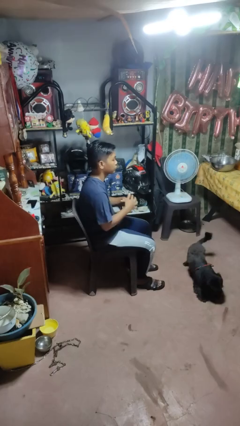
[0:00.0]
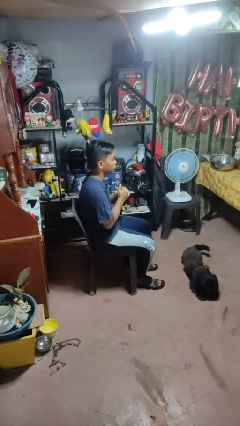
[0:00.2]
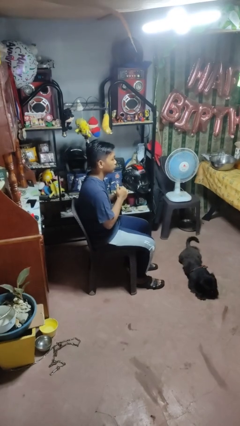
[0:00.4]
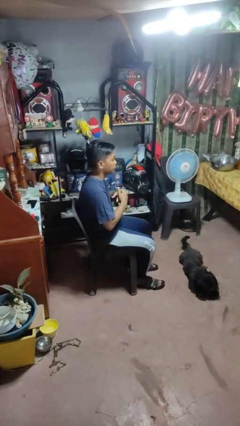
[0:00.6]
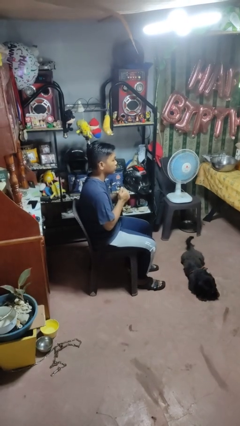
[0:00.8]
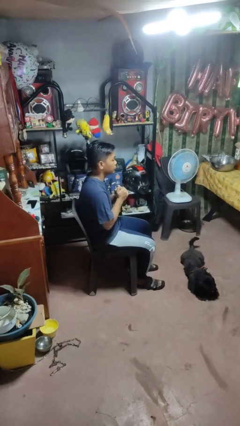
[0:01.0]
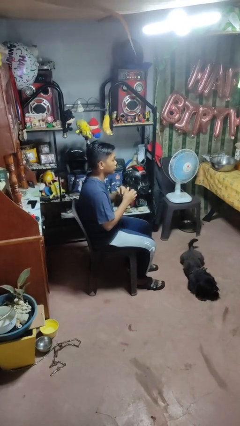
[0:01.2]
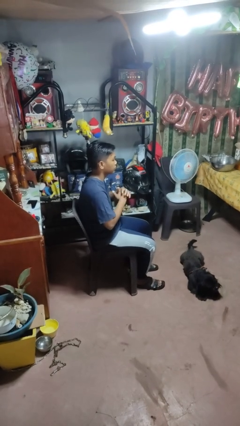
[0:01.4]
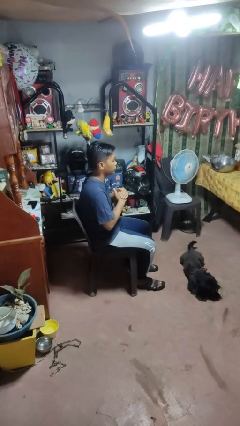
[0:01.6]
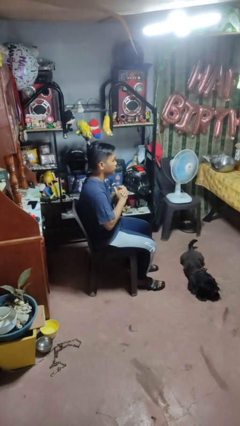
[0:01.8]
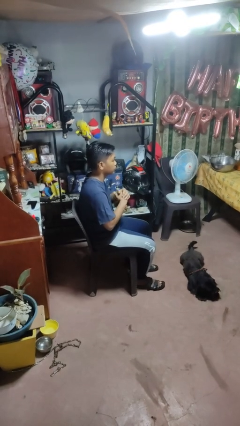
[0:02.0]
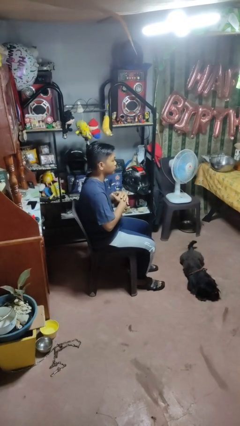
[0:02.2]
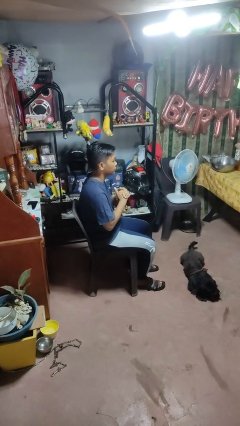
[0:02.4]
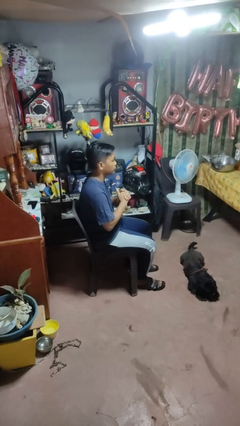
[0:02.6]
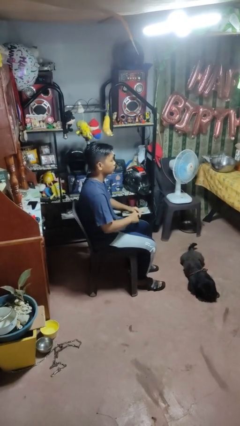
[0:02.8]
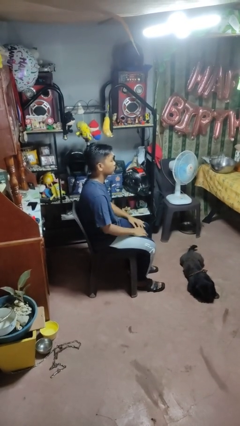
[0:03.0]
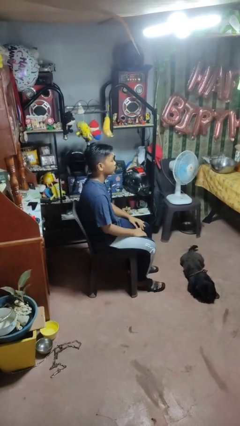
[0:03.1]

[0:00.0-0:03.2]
person cracks knuckles

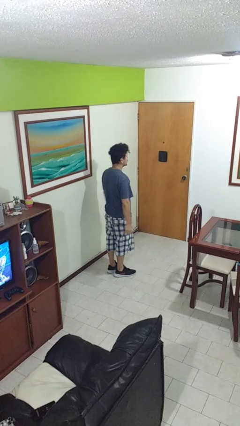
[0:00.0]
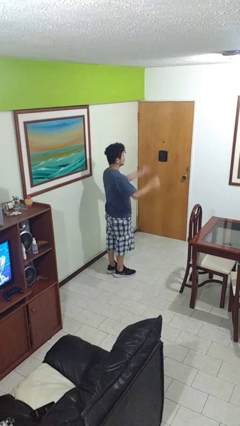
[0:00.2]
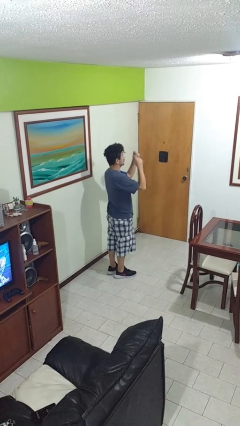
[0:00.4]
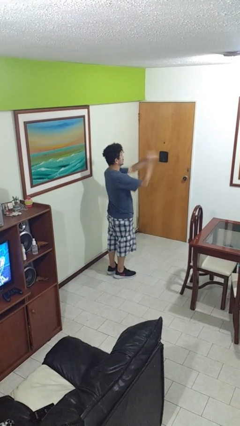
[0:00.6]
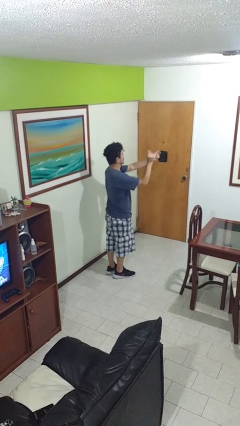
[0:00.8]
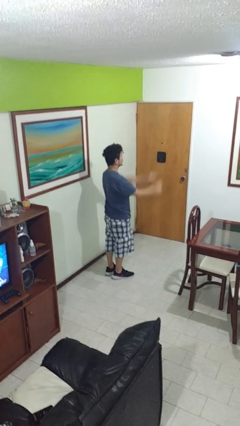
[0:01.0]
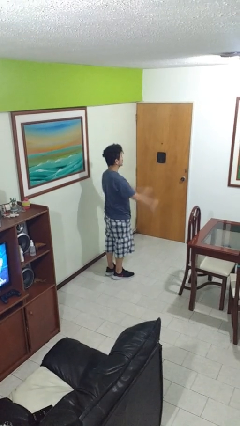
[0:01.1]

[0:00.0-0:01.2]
person snaps fingers

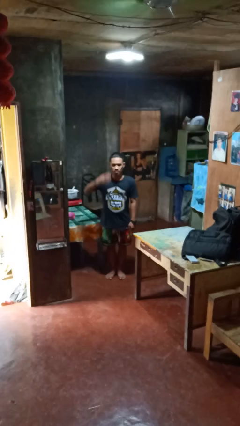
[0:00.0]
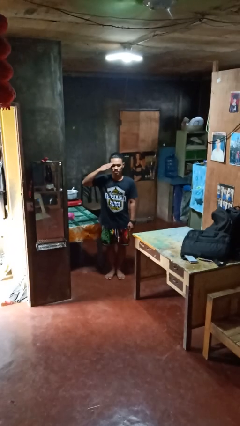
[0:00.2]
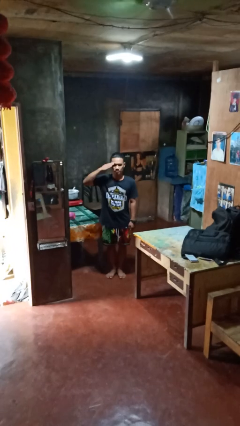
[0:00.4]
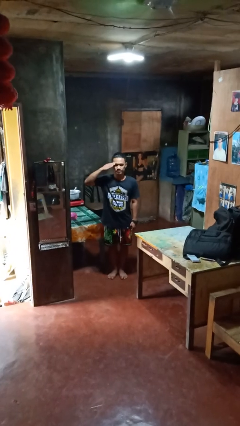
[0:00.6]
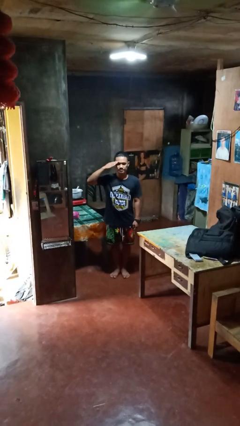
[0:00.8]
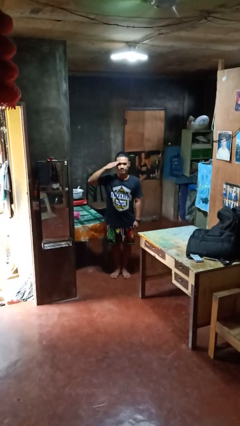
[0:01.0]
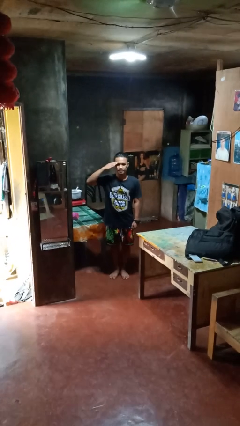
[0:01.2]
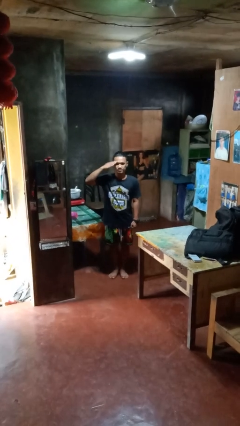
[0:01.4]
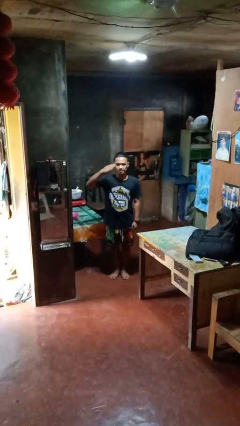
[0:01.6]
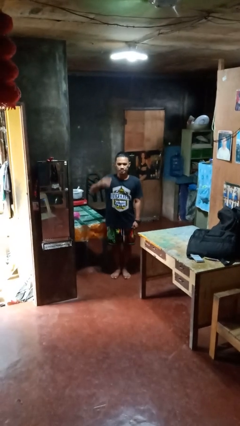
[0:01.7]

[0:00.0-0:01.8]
person salutes

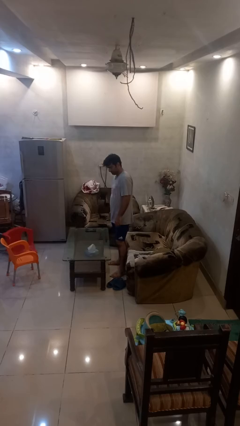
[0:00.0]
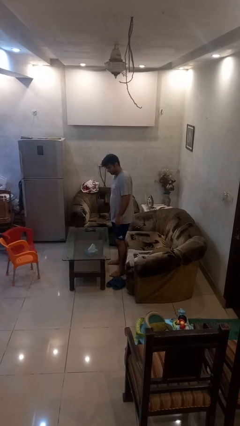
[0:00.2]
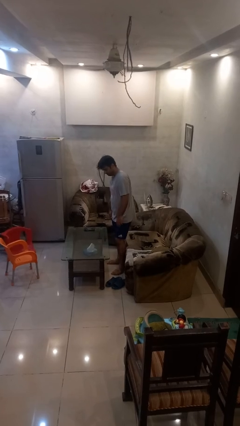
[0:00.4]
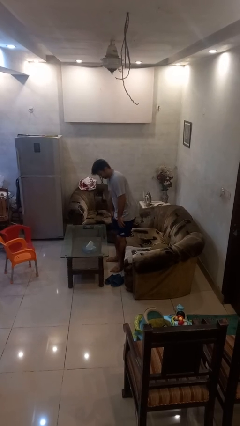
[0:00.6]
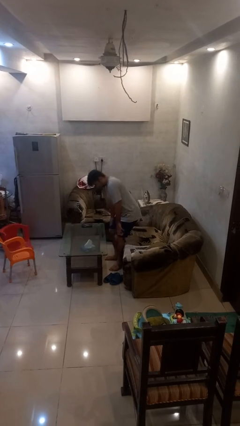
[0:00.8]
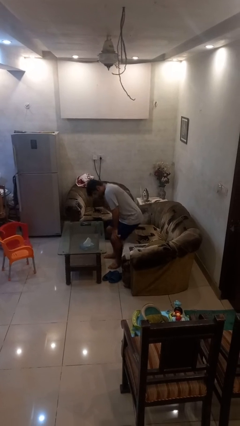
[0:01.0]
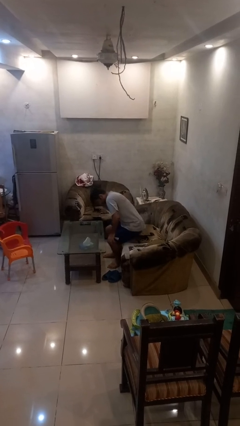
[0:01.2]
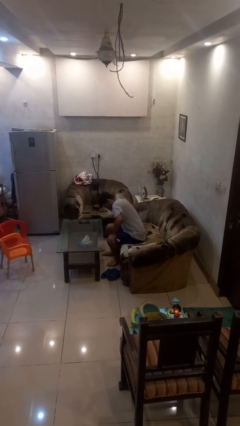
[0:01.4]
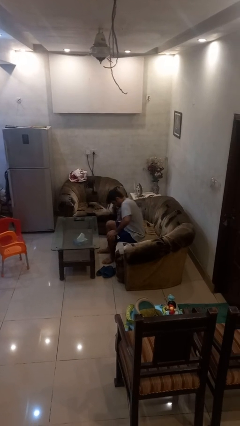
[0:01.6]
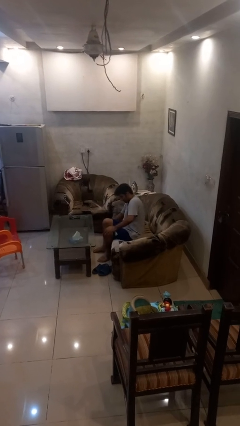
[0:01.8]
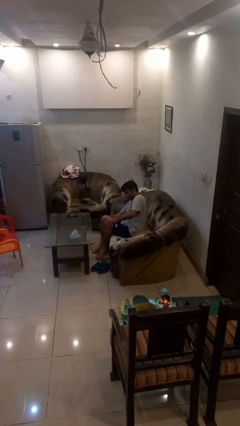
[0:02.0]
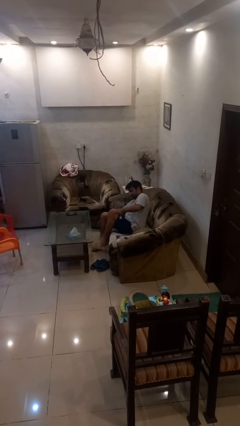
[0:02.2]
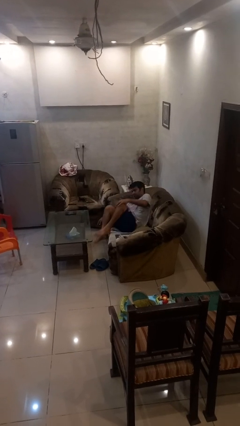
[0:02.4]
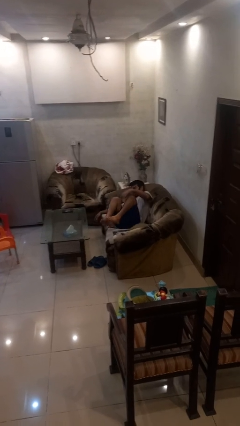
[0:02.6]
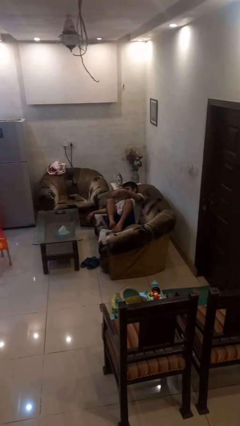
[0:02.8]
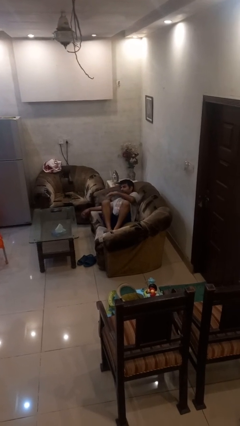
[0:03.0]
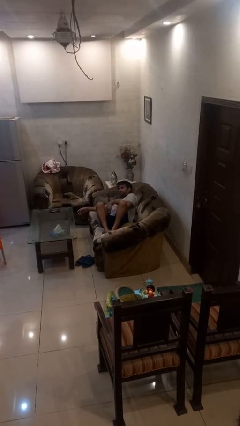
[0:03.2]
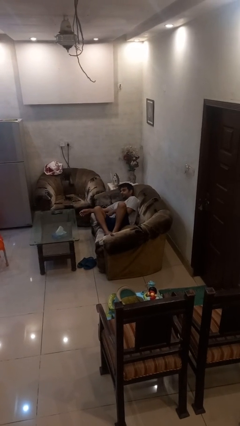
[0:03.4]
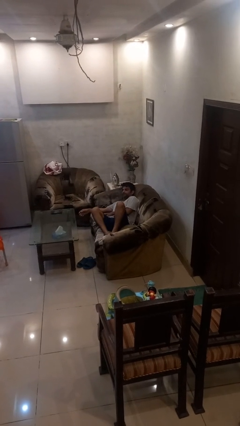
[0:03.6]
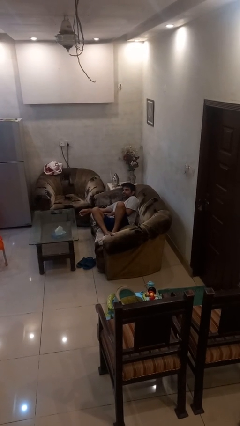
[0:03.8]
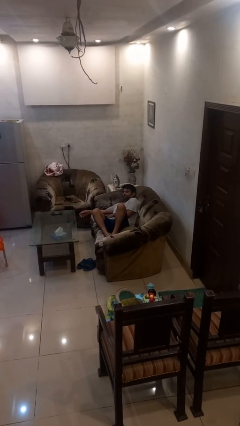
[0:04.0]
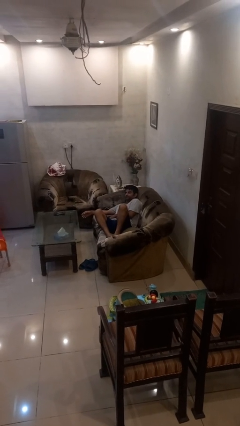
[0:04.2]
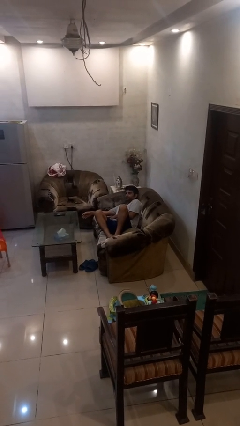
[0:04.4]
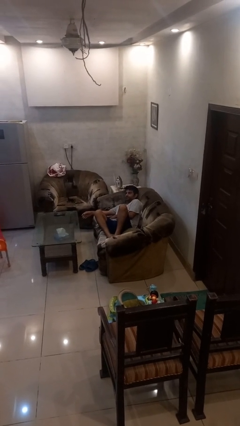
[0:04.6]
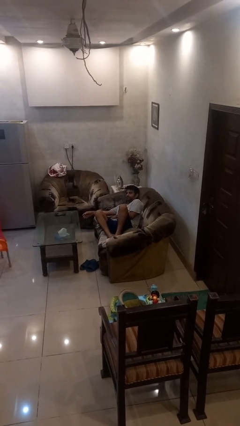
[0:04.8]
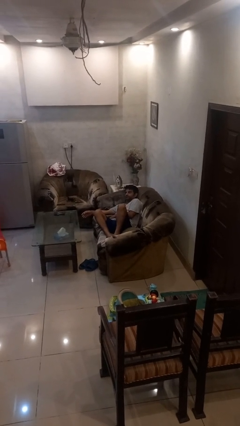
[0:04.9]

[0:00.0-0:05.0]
person lies down on couch

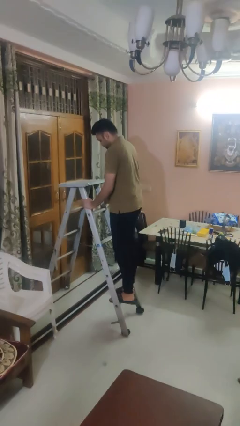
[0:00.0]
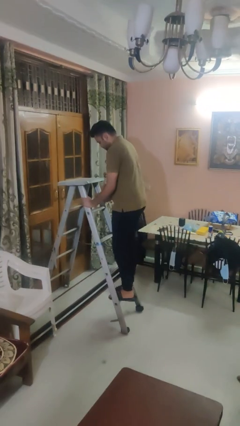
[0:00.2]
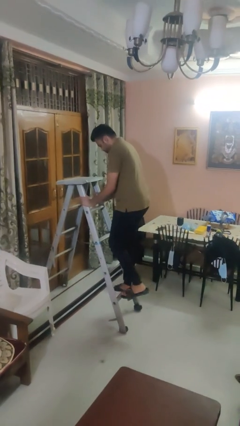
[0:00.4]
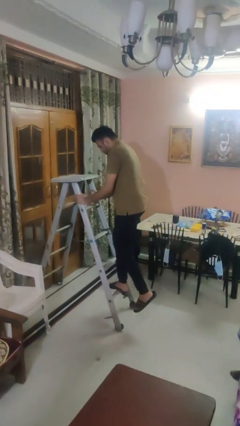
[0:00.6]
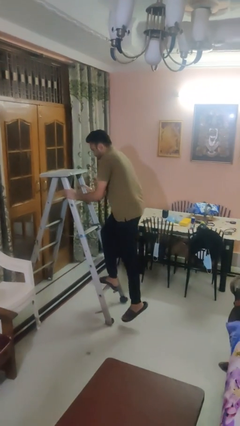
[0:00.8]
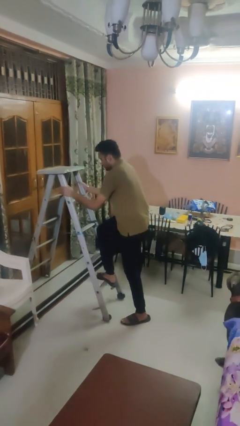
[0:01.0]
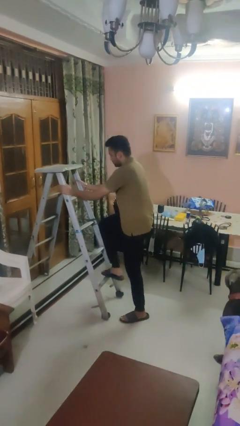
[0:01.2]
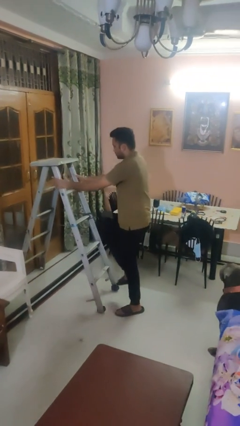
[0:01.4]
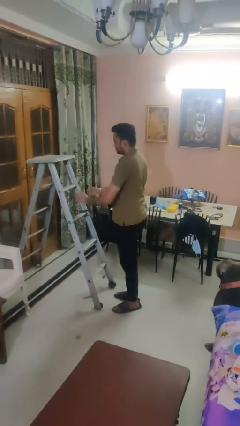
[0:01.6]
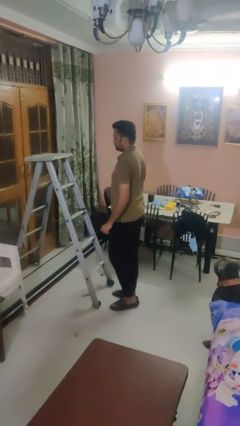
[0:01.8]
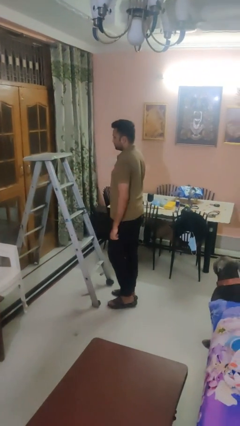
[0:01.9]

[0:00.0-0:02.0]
person climbs down ladder

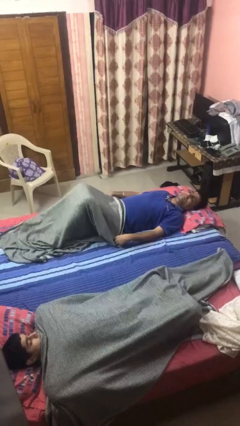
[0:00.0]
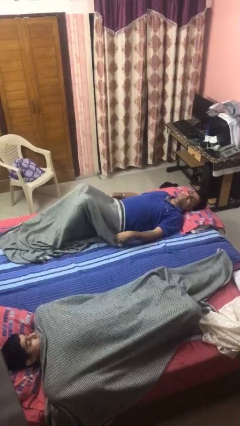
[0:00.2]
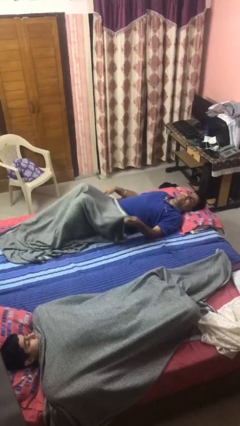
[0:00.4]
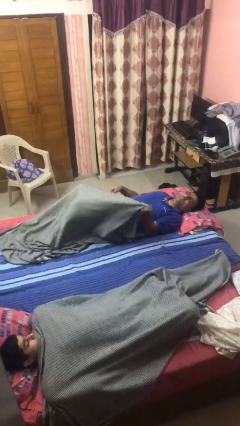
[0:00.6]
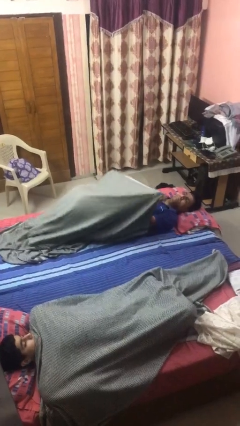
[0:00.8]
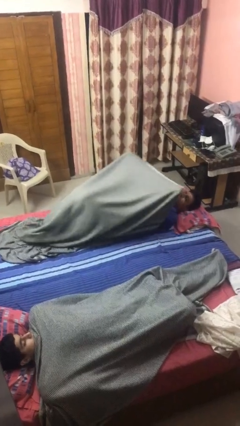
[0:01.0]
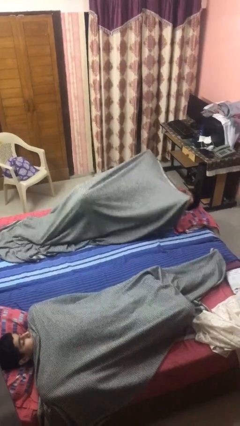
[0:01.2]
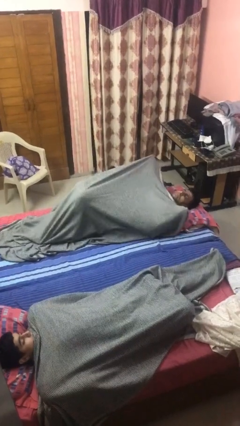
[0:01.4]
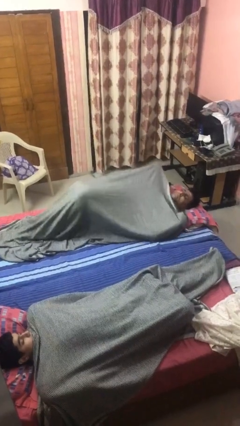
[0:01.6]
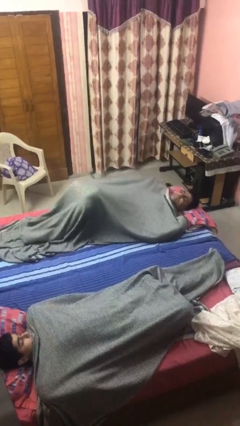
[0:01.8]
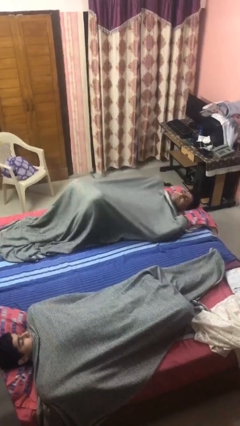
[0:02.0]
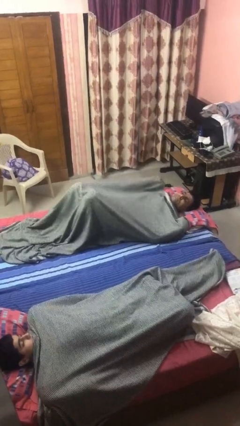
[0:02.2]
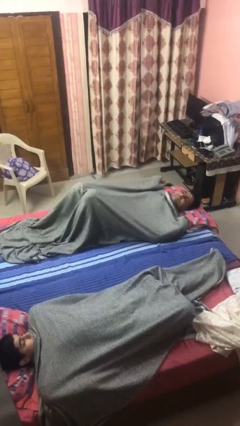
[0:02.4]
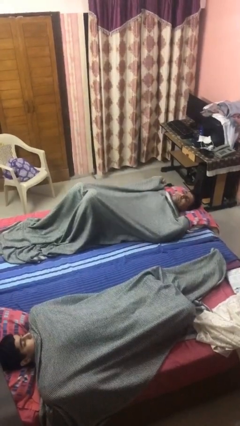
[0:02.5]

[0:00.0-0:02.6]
person covers with bedsheets

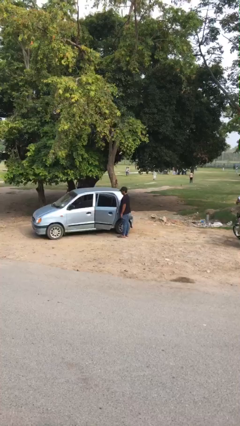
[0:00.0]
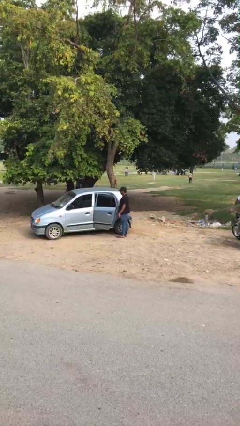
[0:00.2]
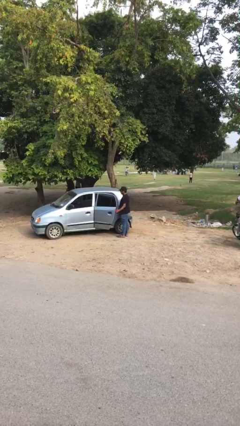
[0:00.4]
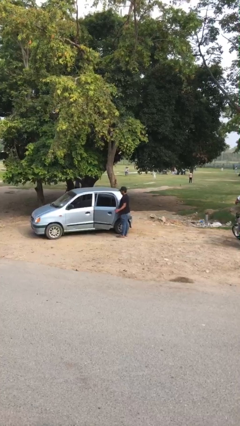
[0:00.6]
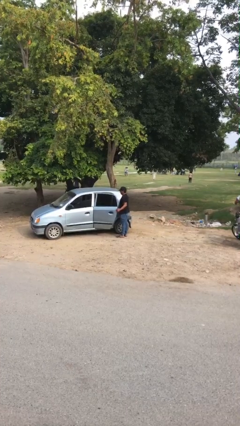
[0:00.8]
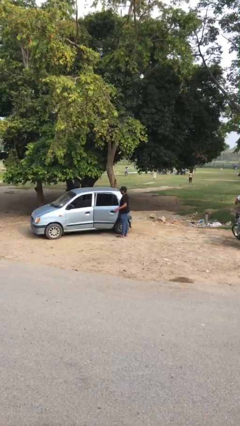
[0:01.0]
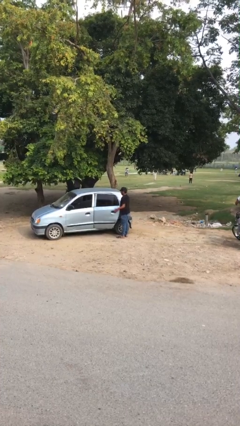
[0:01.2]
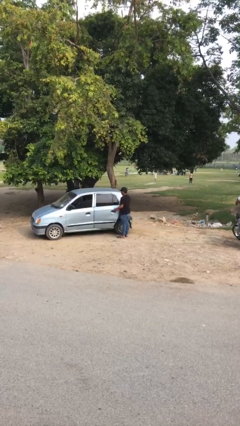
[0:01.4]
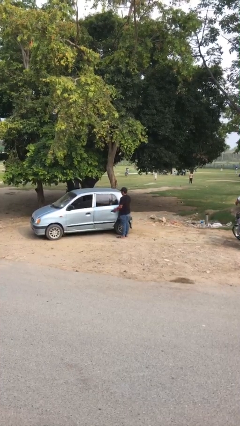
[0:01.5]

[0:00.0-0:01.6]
person closes car door
